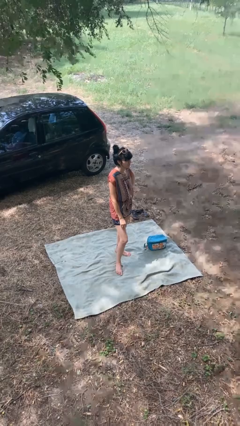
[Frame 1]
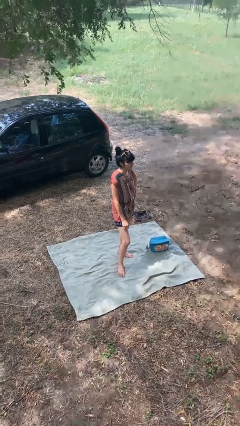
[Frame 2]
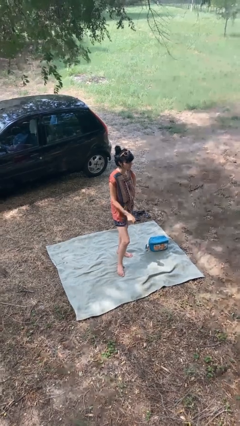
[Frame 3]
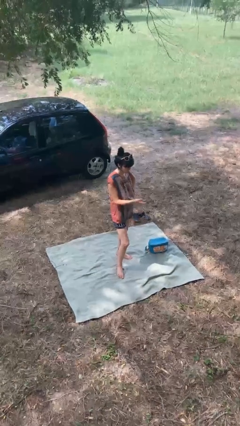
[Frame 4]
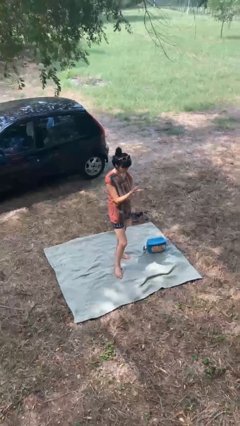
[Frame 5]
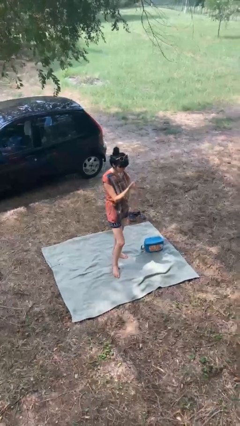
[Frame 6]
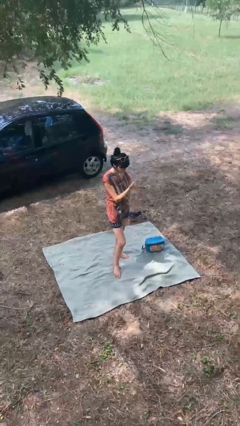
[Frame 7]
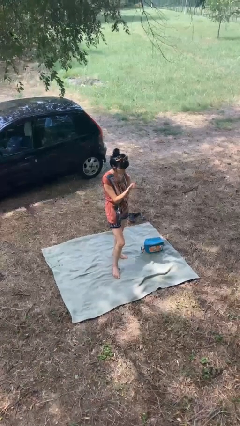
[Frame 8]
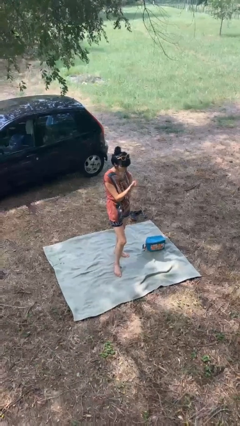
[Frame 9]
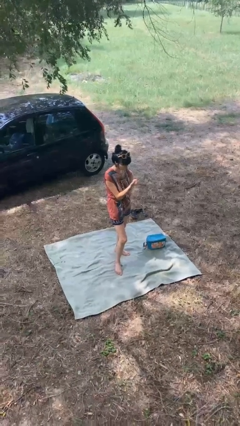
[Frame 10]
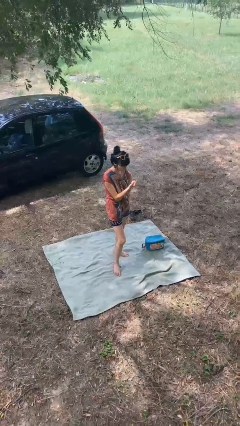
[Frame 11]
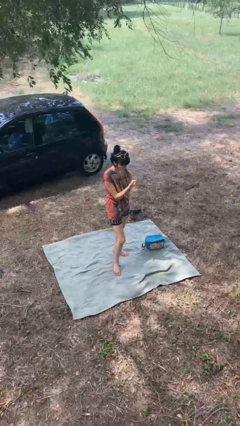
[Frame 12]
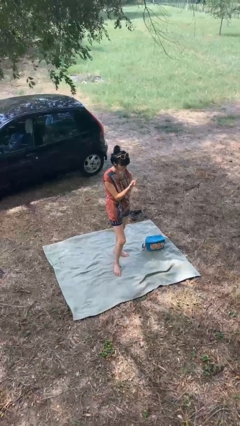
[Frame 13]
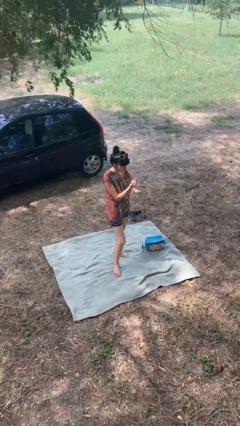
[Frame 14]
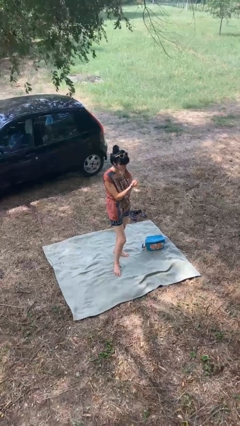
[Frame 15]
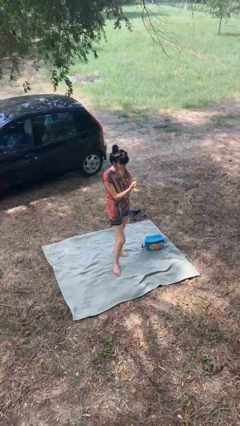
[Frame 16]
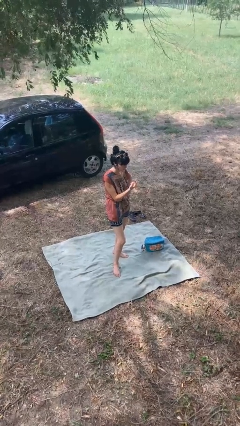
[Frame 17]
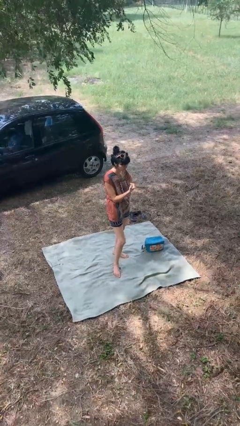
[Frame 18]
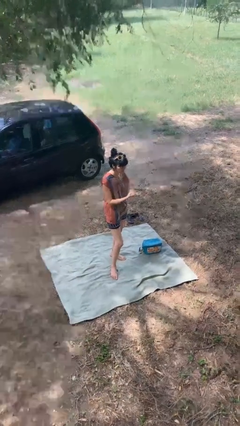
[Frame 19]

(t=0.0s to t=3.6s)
person gestures come here

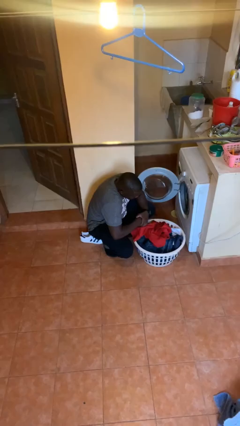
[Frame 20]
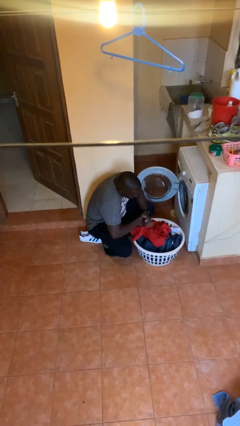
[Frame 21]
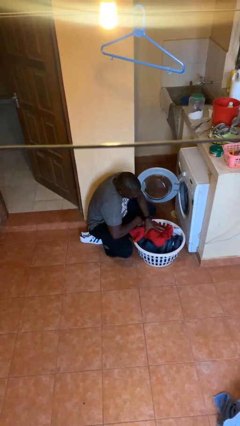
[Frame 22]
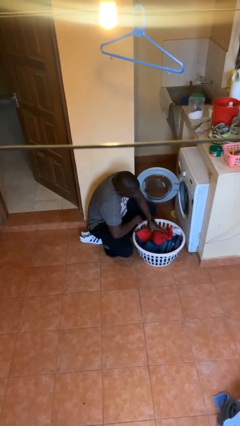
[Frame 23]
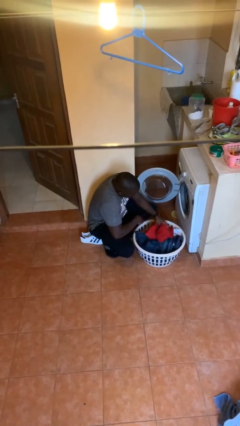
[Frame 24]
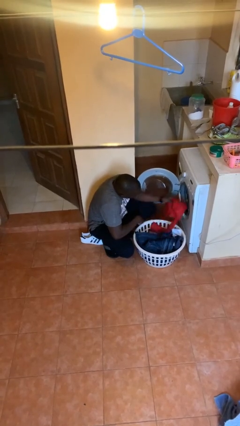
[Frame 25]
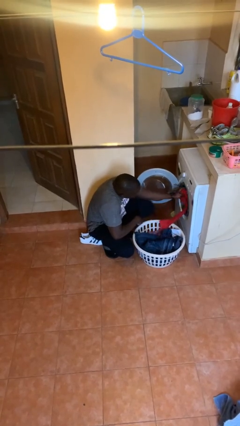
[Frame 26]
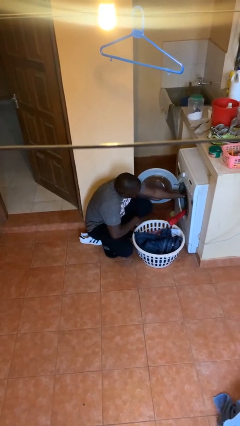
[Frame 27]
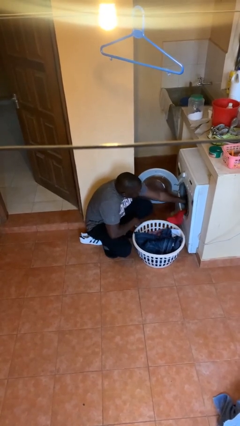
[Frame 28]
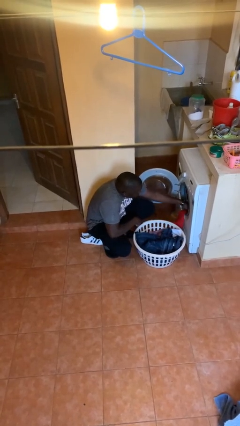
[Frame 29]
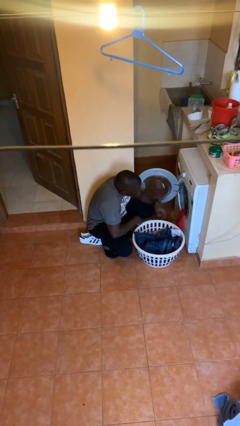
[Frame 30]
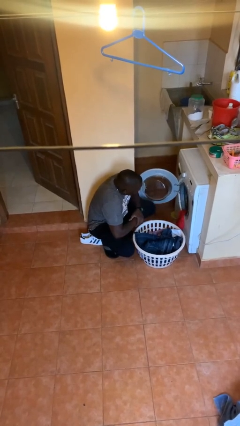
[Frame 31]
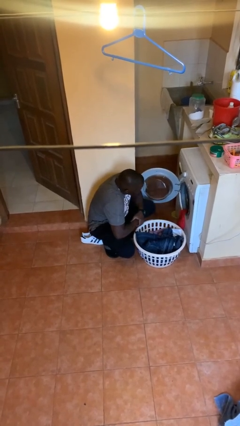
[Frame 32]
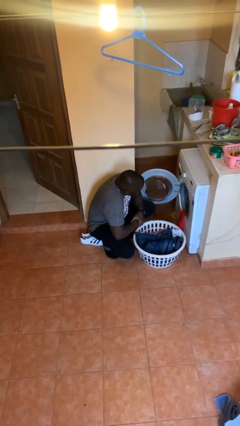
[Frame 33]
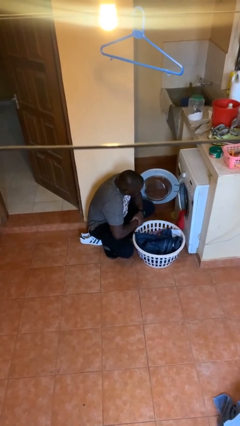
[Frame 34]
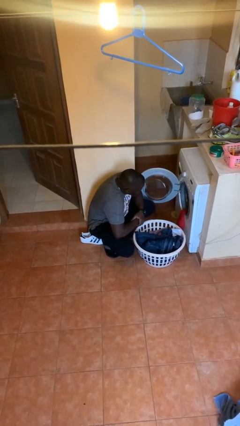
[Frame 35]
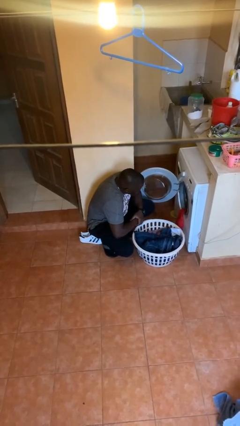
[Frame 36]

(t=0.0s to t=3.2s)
person loads dryer

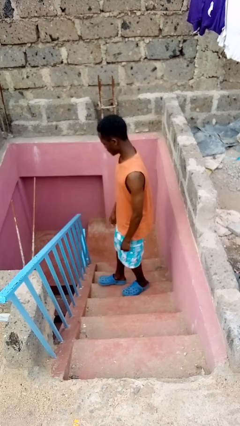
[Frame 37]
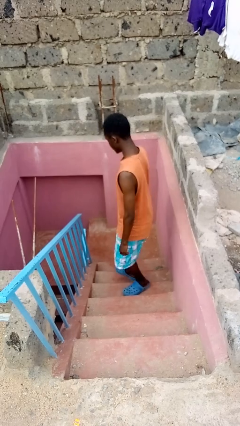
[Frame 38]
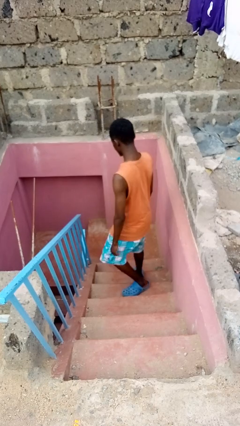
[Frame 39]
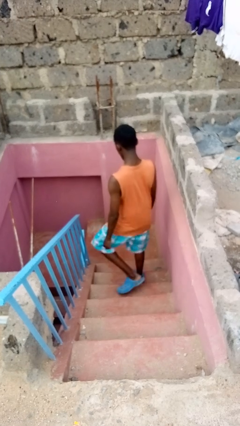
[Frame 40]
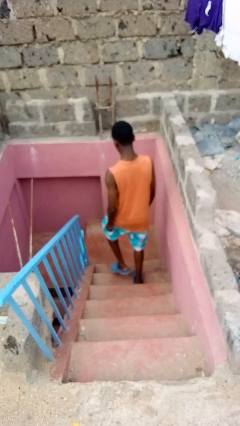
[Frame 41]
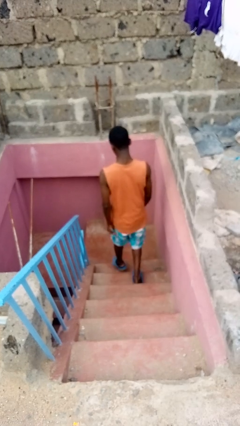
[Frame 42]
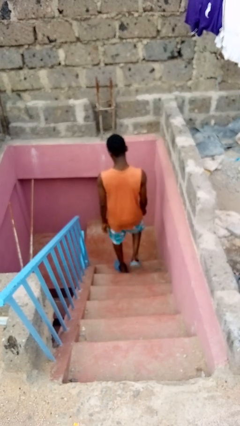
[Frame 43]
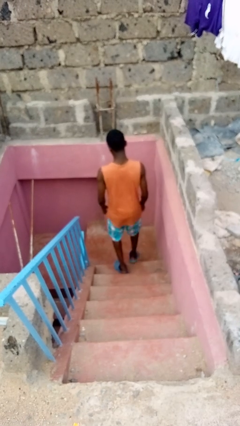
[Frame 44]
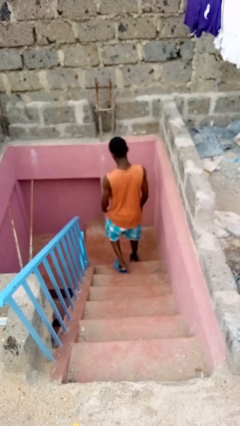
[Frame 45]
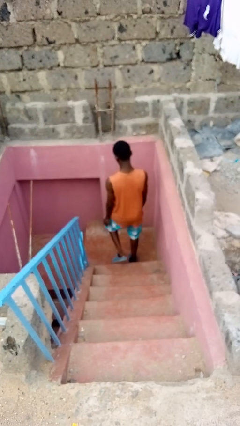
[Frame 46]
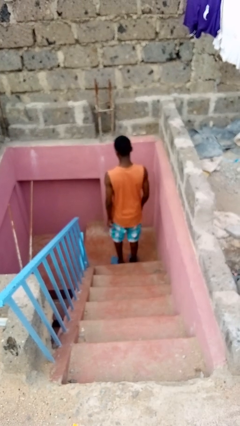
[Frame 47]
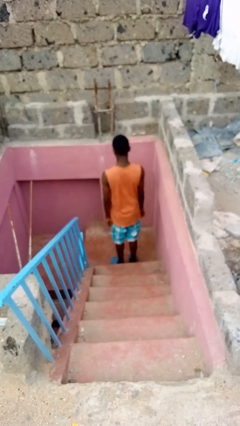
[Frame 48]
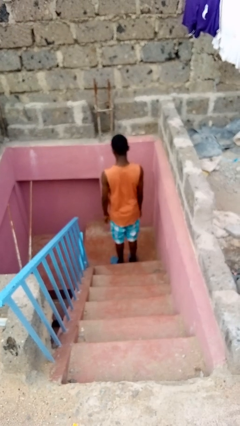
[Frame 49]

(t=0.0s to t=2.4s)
person climbs down stairs

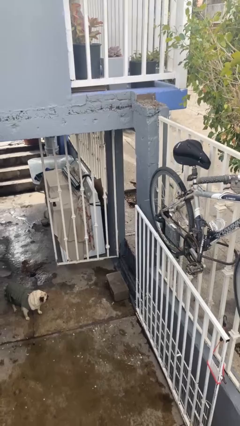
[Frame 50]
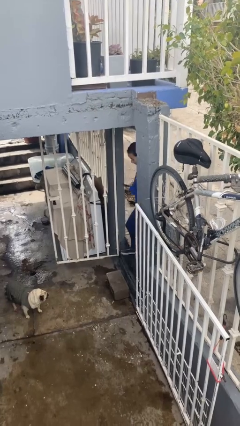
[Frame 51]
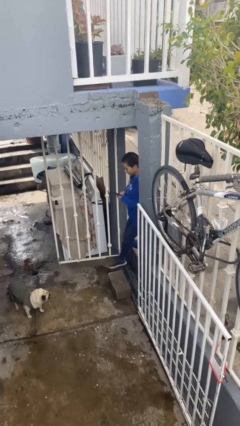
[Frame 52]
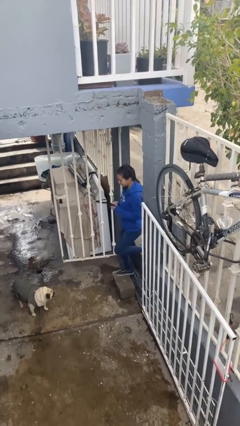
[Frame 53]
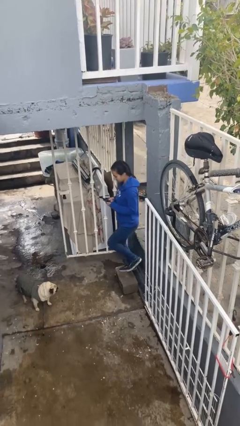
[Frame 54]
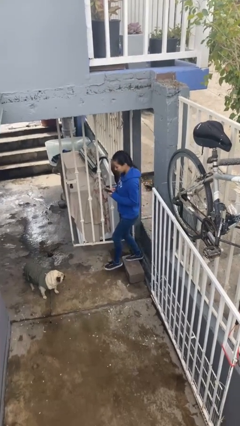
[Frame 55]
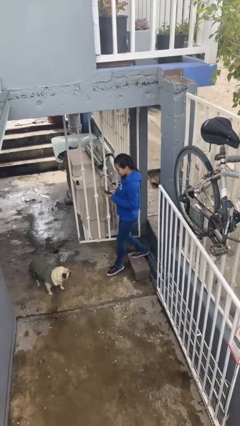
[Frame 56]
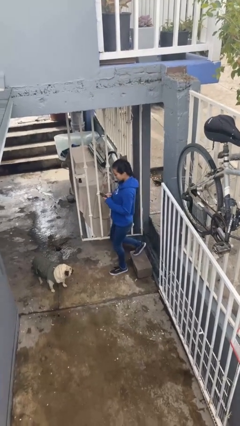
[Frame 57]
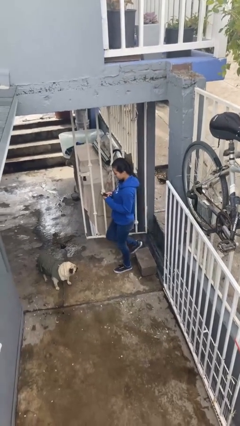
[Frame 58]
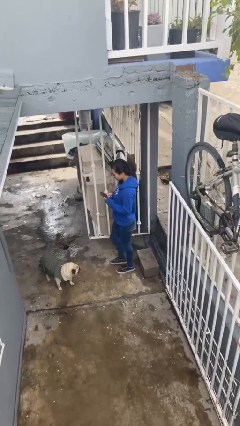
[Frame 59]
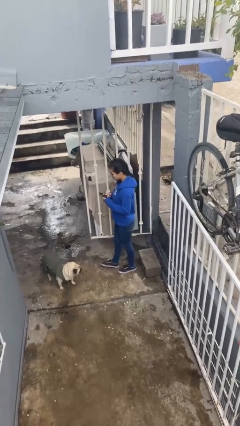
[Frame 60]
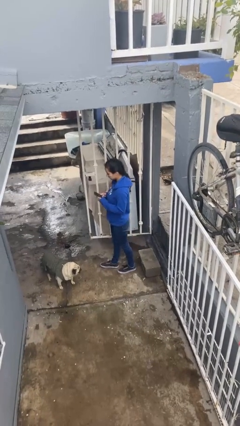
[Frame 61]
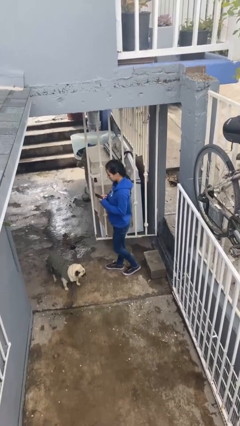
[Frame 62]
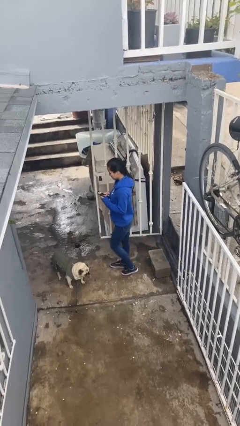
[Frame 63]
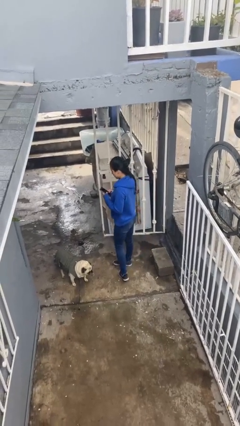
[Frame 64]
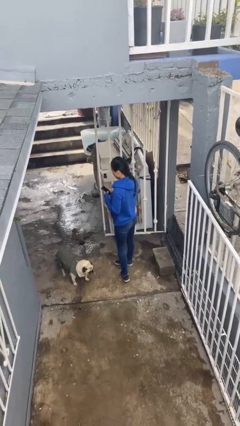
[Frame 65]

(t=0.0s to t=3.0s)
person enters scene through structure

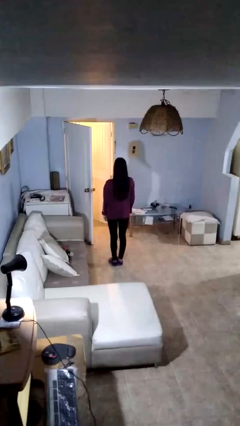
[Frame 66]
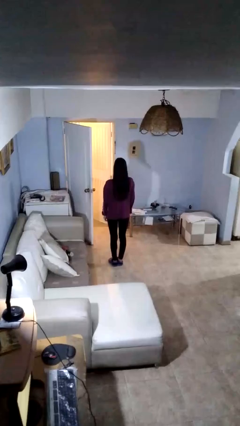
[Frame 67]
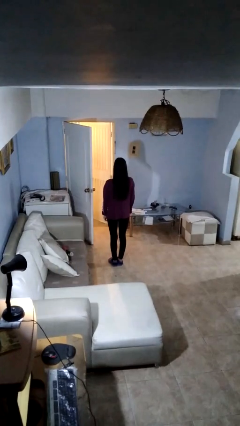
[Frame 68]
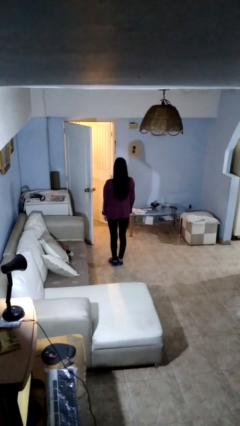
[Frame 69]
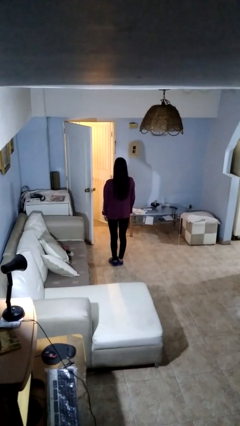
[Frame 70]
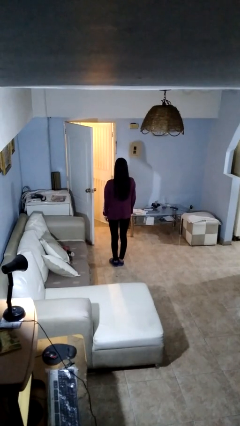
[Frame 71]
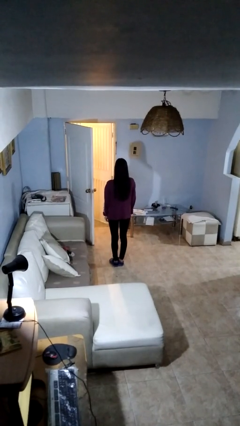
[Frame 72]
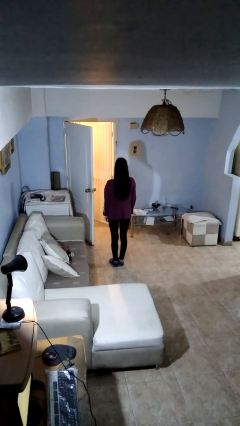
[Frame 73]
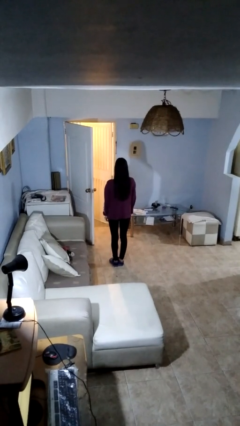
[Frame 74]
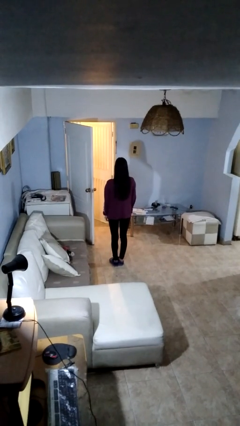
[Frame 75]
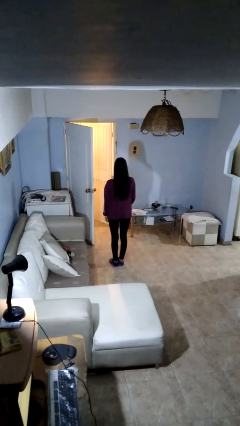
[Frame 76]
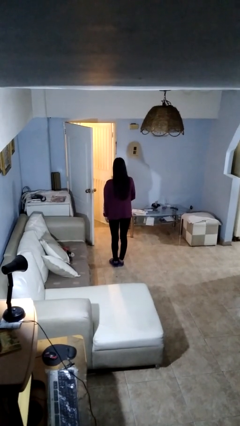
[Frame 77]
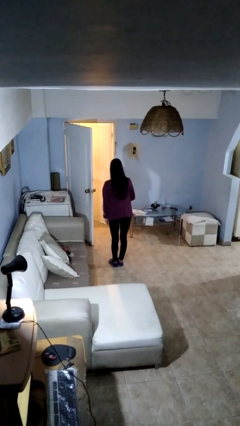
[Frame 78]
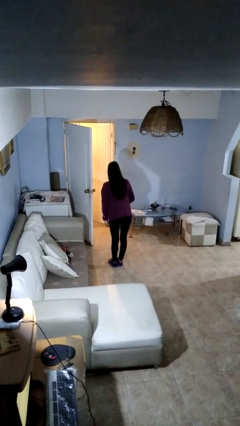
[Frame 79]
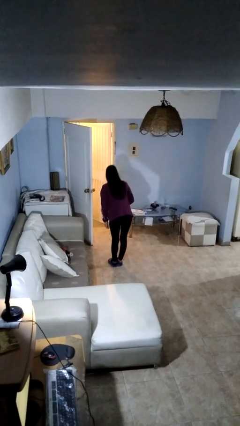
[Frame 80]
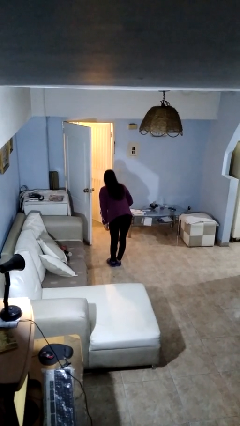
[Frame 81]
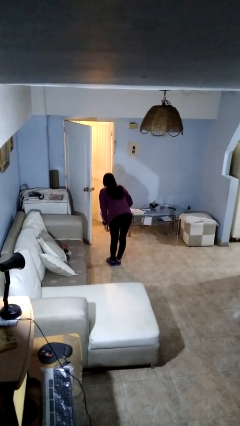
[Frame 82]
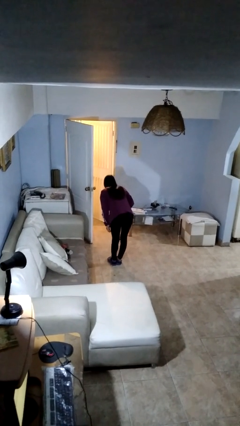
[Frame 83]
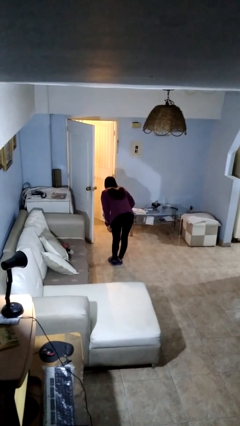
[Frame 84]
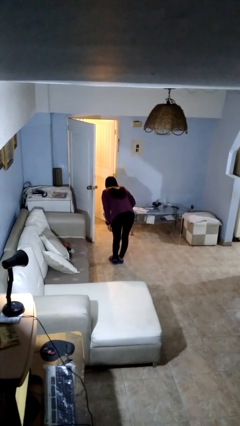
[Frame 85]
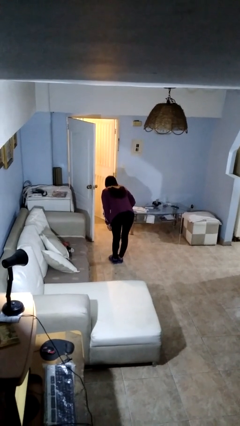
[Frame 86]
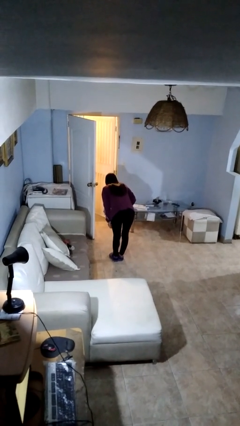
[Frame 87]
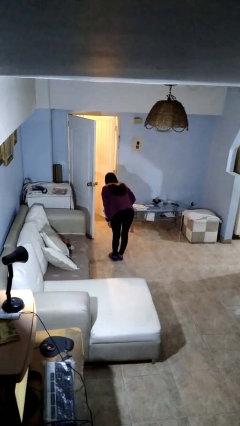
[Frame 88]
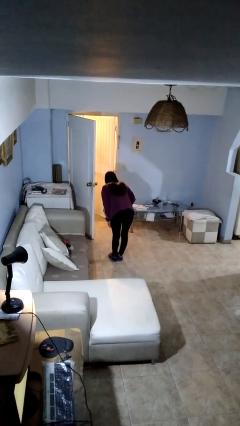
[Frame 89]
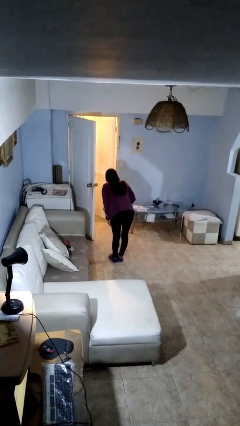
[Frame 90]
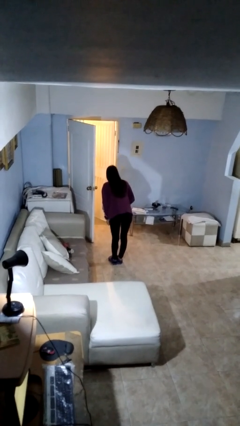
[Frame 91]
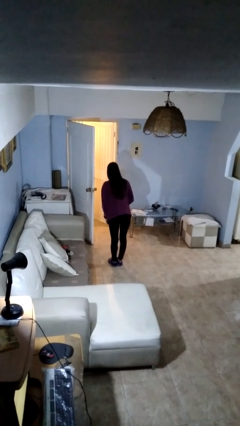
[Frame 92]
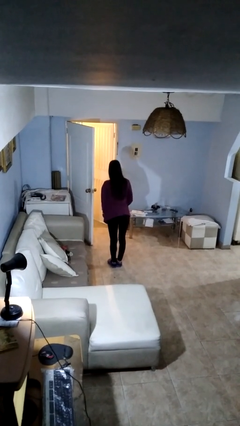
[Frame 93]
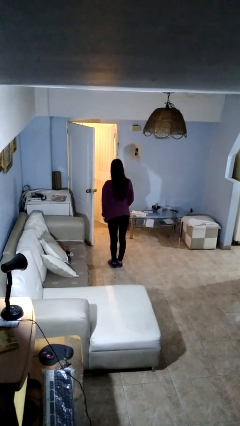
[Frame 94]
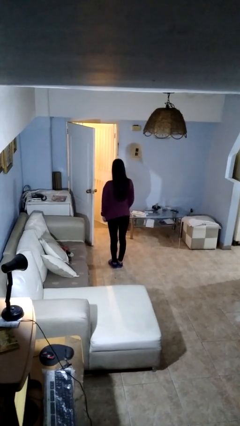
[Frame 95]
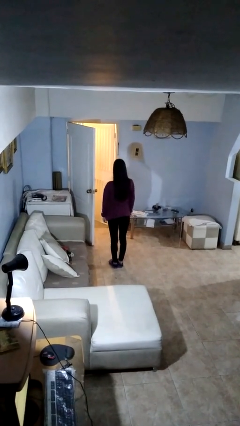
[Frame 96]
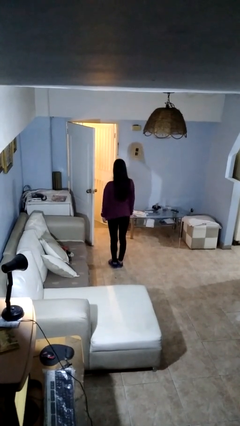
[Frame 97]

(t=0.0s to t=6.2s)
person bows
